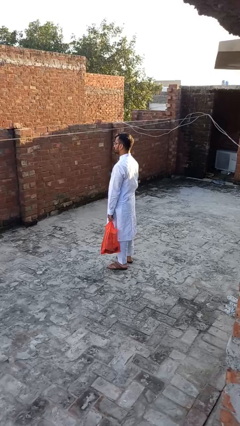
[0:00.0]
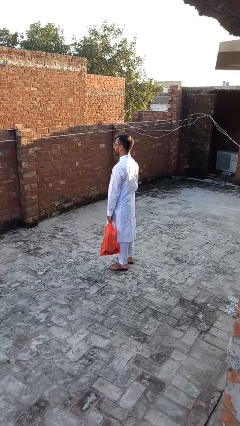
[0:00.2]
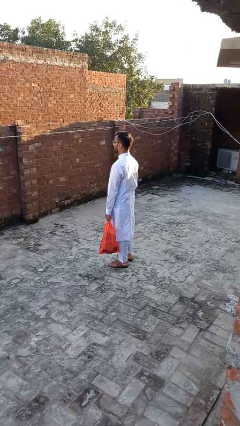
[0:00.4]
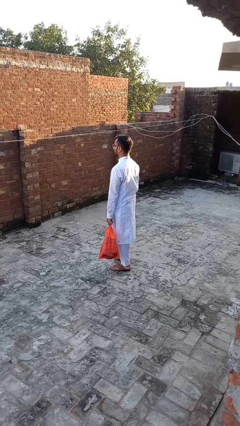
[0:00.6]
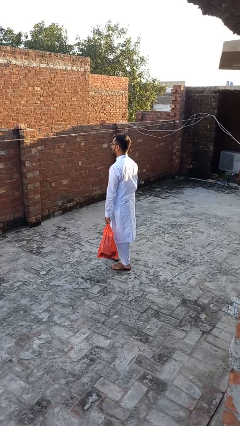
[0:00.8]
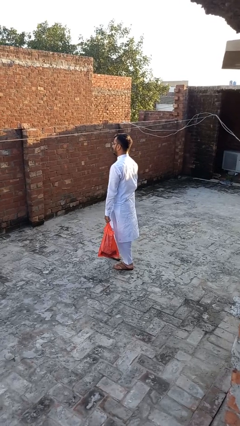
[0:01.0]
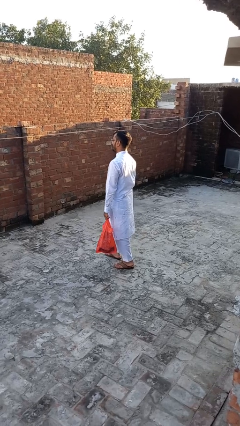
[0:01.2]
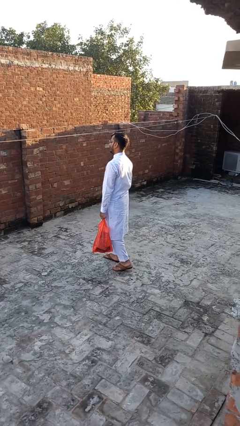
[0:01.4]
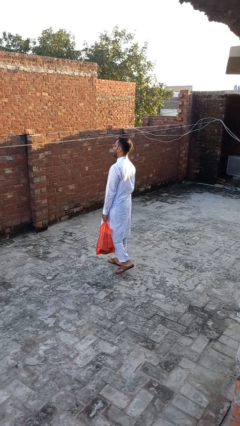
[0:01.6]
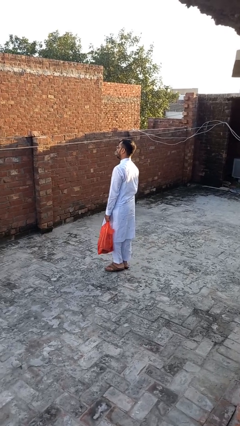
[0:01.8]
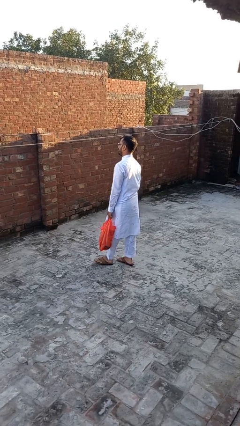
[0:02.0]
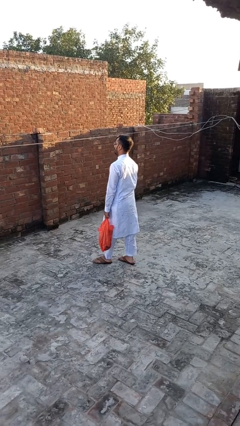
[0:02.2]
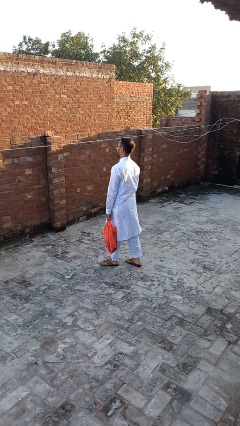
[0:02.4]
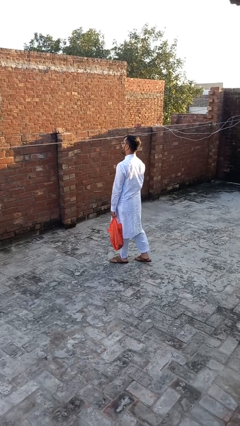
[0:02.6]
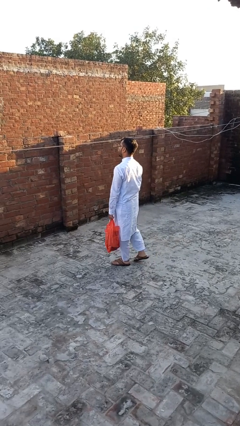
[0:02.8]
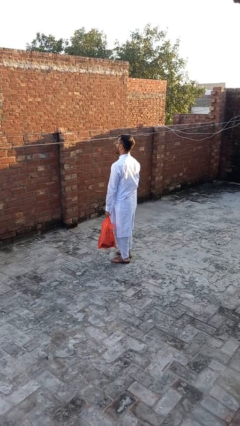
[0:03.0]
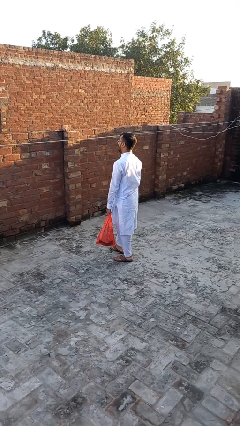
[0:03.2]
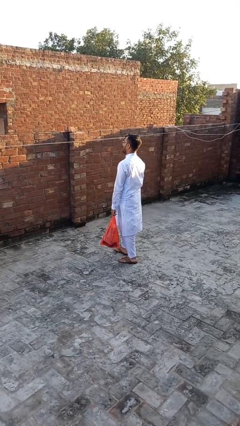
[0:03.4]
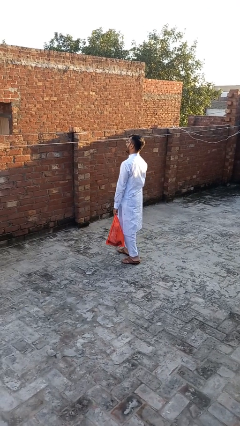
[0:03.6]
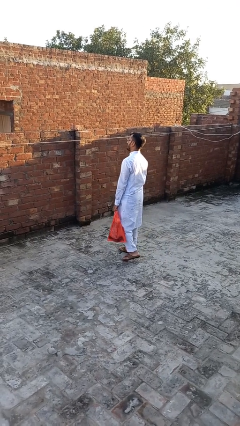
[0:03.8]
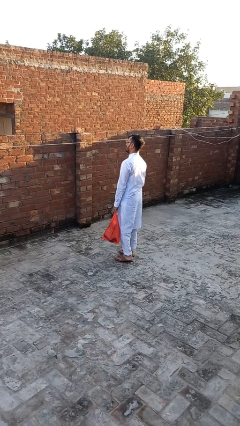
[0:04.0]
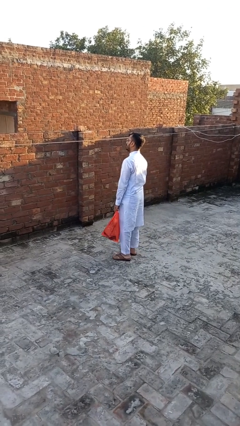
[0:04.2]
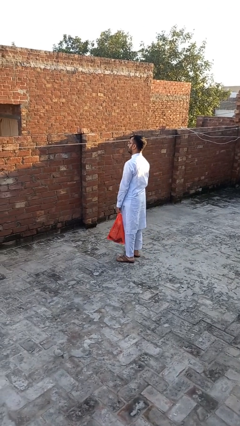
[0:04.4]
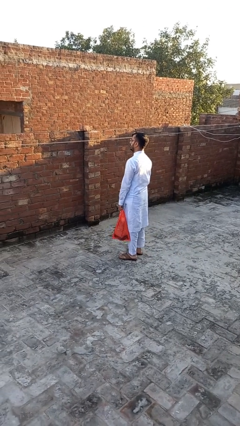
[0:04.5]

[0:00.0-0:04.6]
person carries groceries

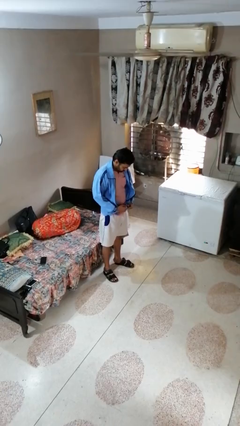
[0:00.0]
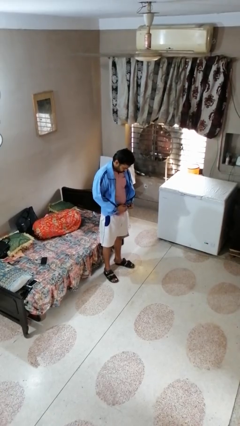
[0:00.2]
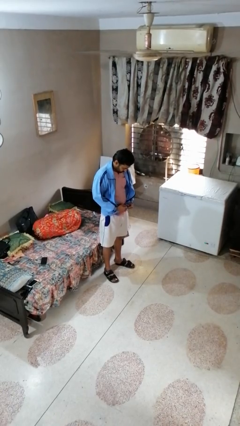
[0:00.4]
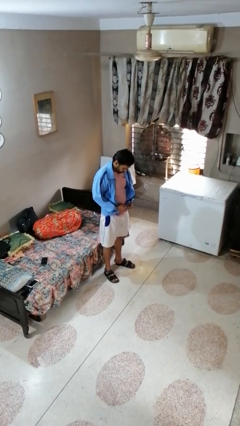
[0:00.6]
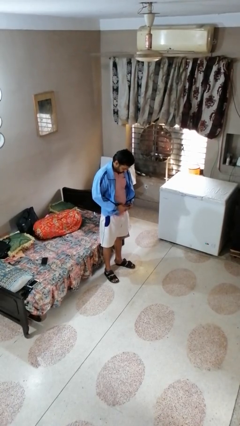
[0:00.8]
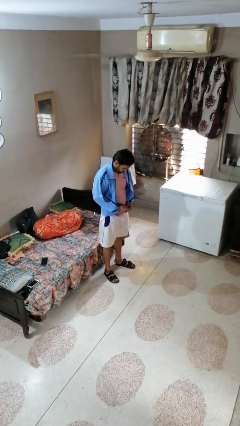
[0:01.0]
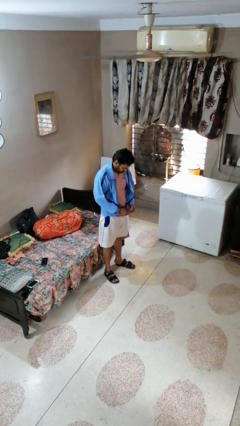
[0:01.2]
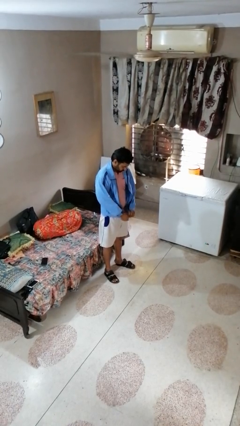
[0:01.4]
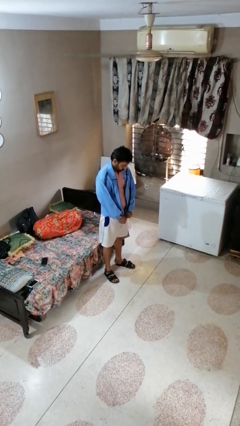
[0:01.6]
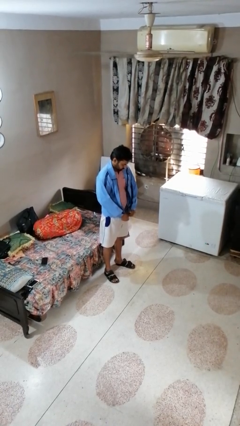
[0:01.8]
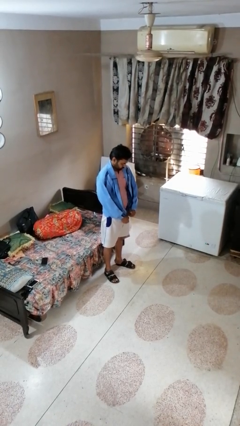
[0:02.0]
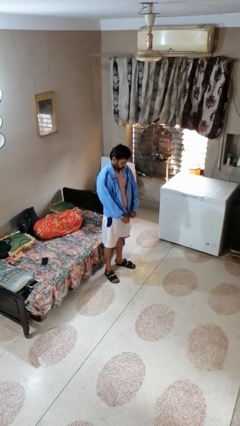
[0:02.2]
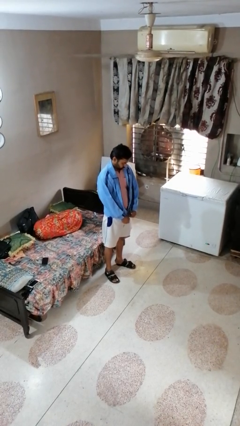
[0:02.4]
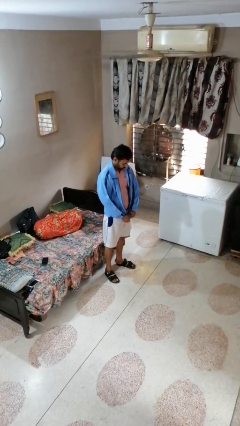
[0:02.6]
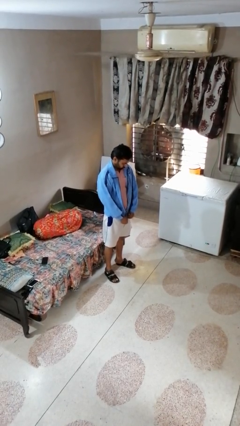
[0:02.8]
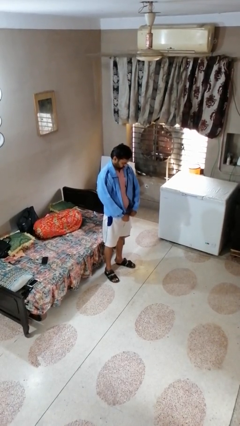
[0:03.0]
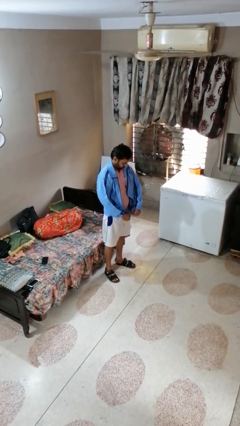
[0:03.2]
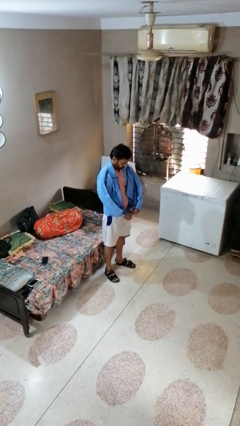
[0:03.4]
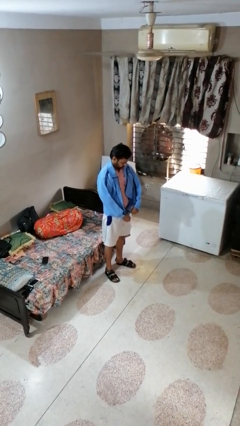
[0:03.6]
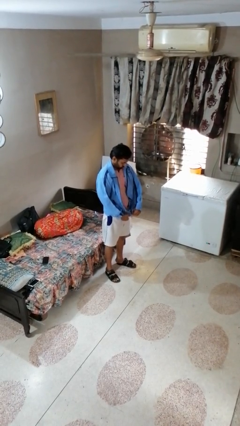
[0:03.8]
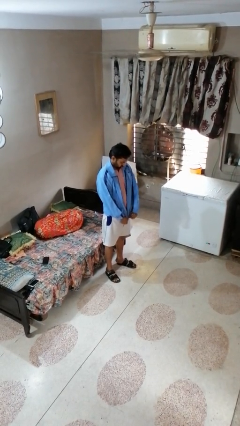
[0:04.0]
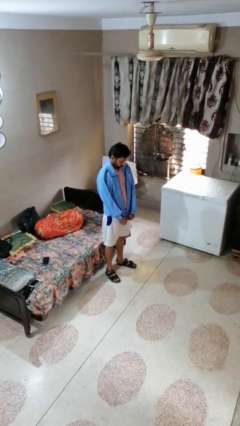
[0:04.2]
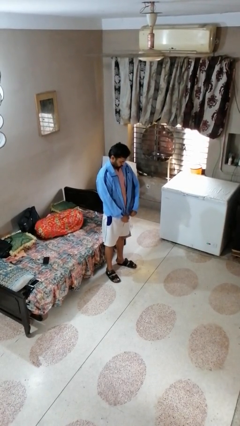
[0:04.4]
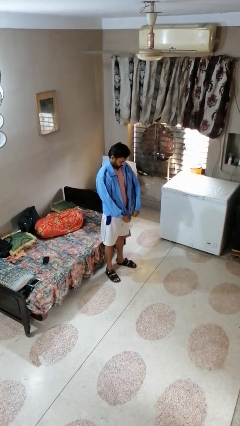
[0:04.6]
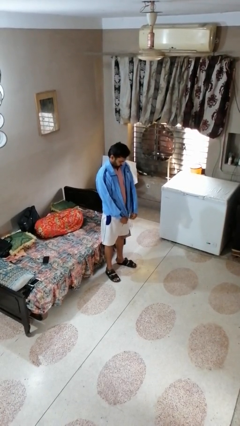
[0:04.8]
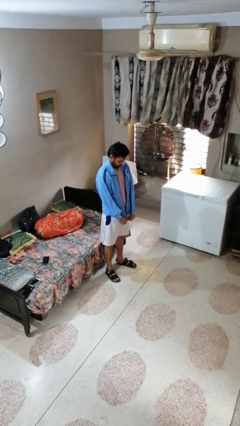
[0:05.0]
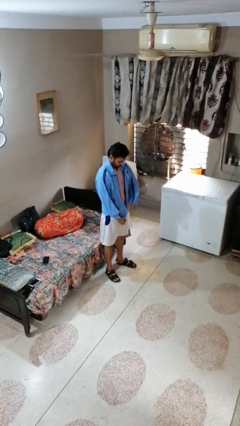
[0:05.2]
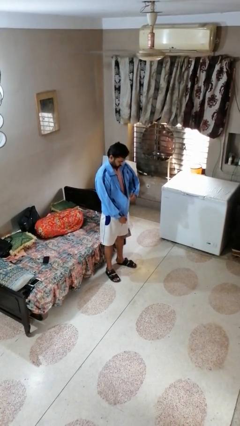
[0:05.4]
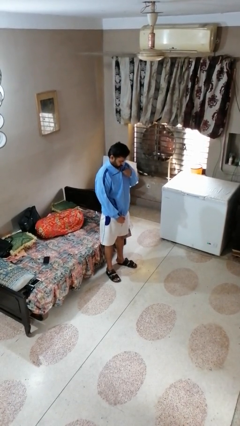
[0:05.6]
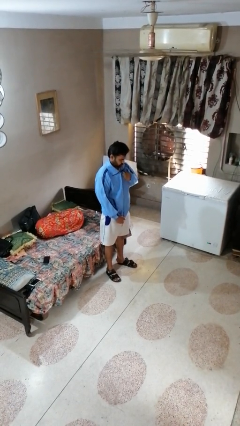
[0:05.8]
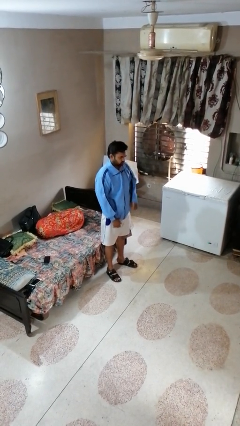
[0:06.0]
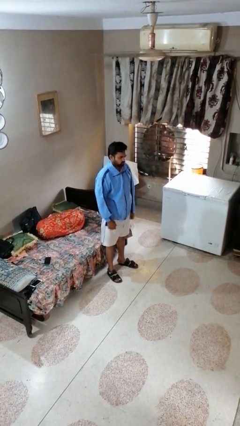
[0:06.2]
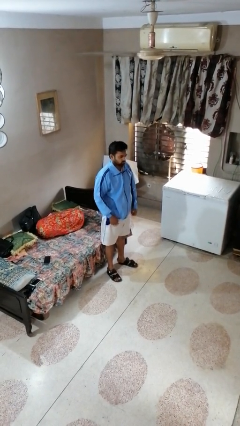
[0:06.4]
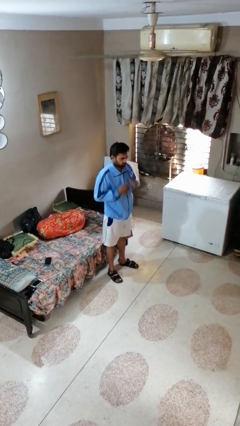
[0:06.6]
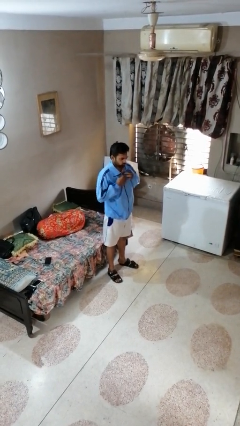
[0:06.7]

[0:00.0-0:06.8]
person zips up jacket

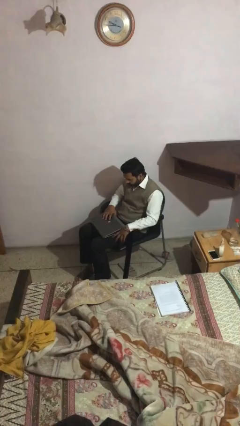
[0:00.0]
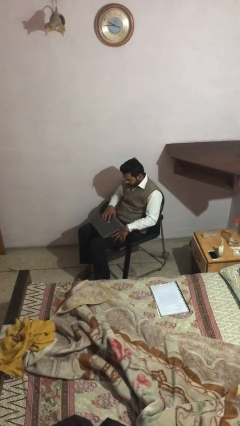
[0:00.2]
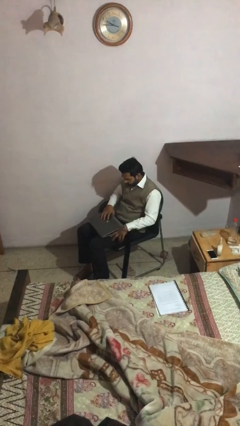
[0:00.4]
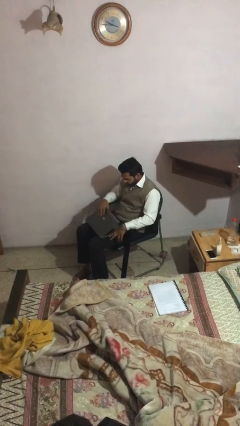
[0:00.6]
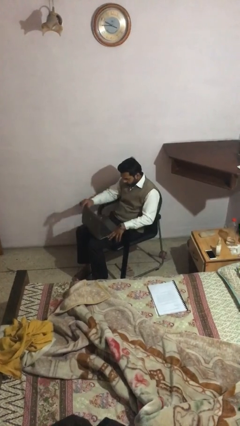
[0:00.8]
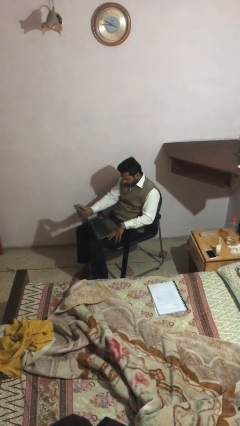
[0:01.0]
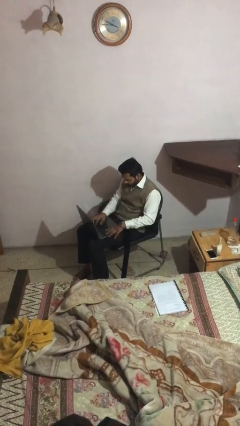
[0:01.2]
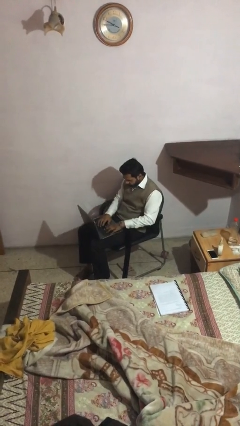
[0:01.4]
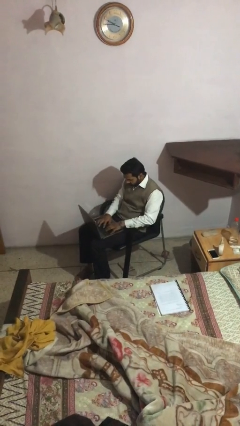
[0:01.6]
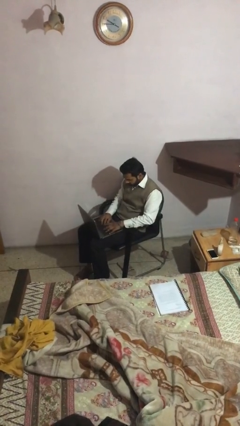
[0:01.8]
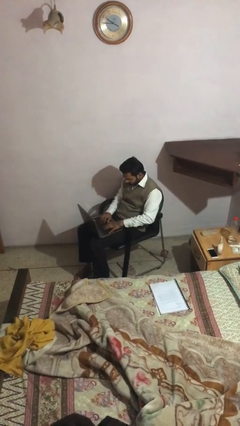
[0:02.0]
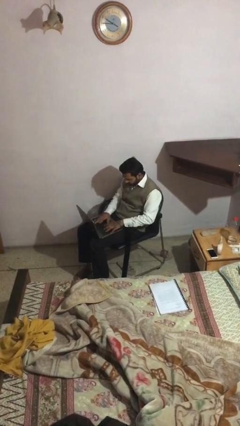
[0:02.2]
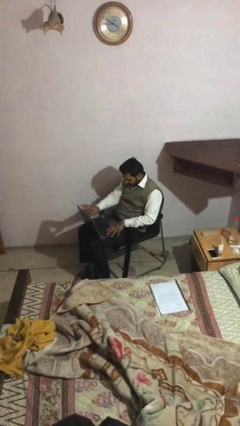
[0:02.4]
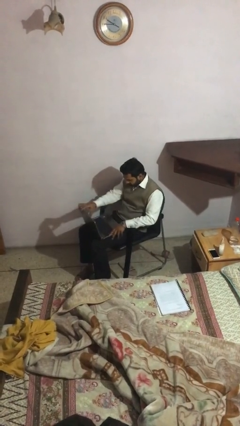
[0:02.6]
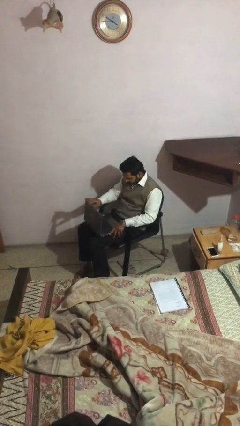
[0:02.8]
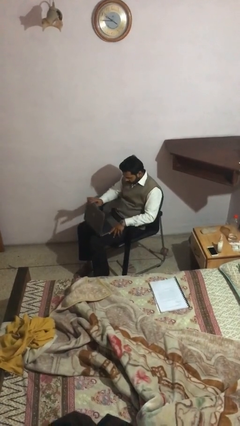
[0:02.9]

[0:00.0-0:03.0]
person interacts with laptop

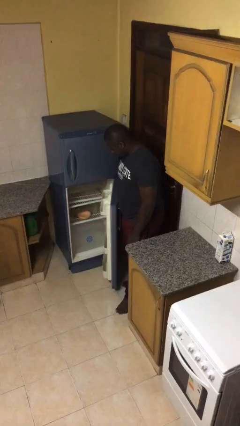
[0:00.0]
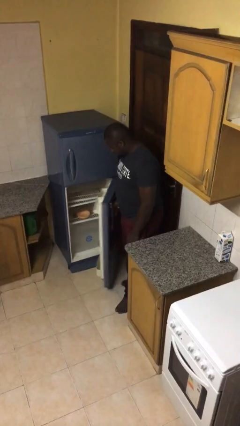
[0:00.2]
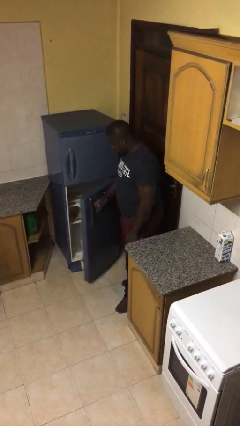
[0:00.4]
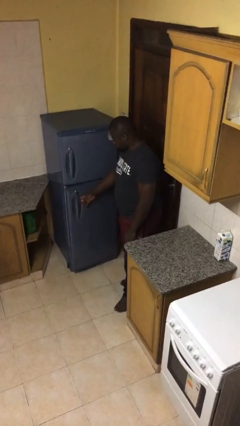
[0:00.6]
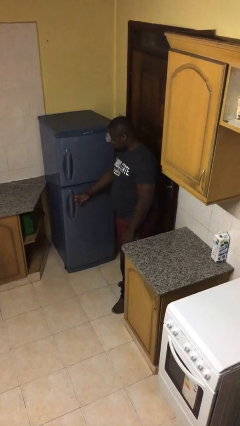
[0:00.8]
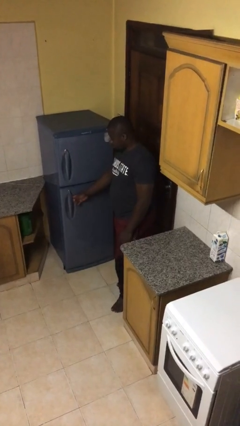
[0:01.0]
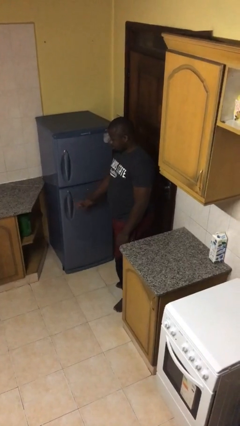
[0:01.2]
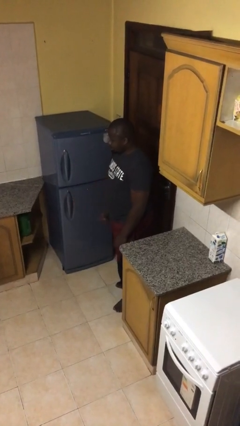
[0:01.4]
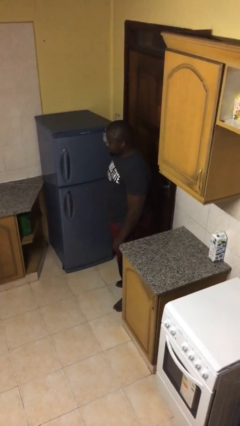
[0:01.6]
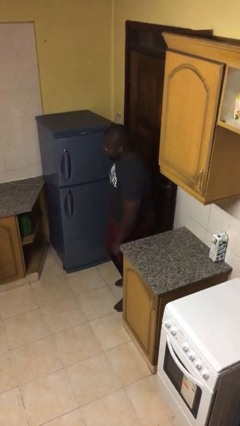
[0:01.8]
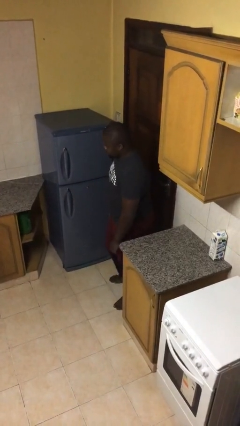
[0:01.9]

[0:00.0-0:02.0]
person closes refrigerator

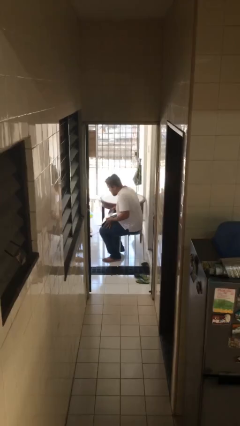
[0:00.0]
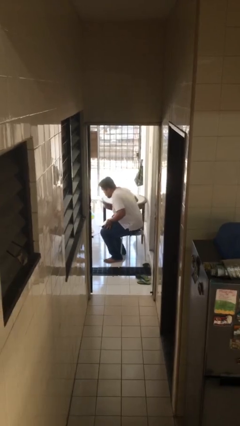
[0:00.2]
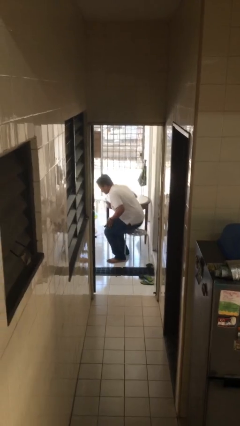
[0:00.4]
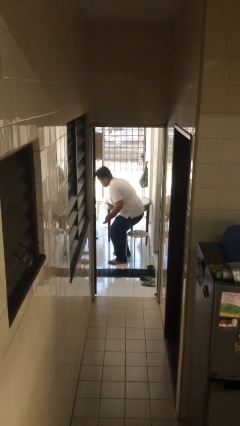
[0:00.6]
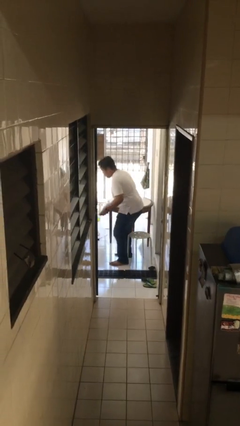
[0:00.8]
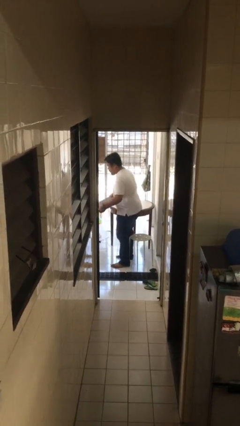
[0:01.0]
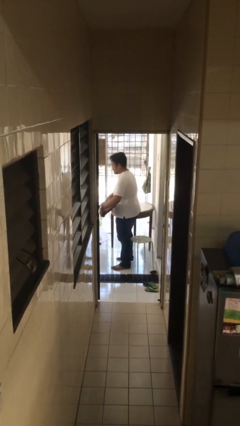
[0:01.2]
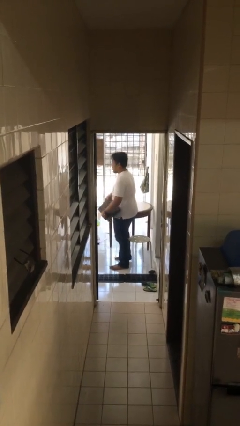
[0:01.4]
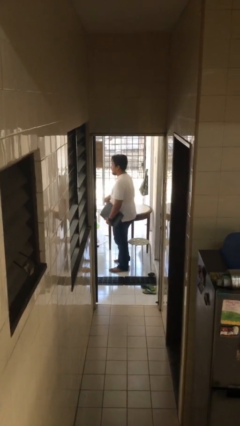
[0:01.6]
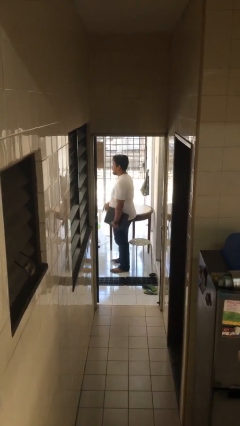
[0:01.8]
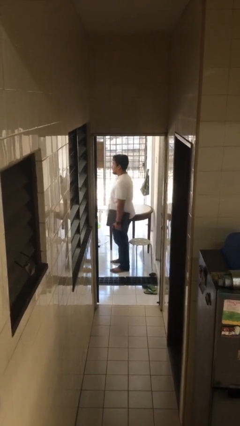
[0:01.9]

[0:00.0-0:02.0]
person stands up
